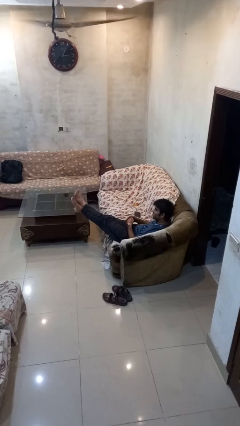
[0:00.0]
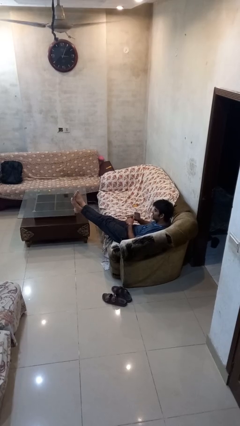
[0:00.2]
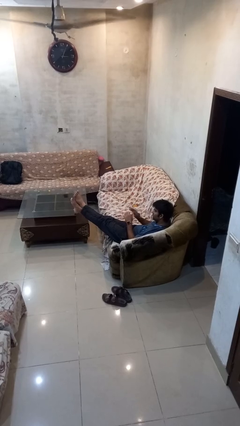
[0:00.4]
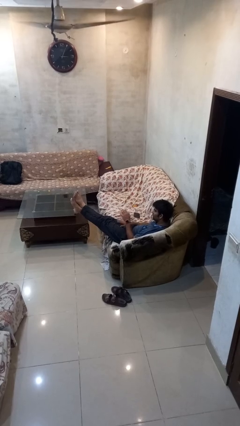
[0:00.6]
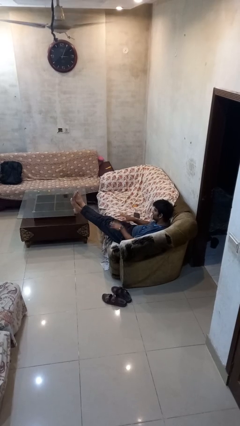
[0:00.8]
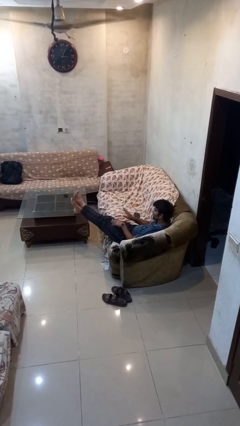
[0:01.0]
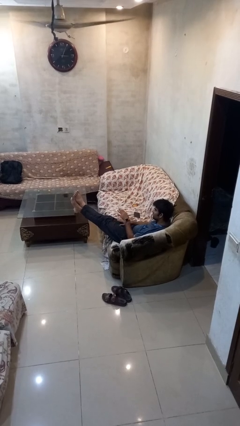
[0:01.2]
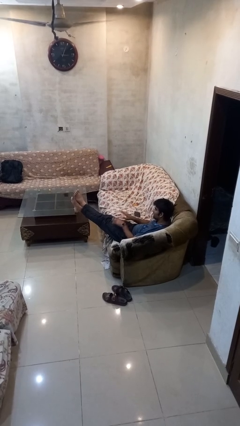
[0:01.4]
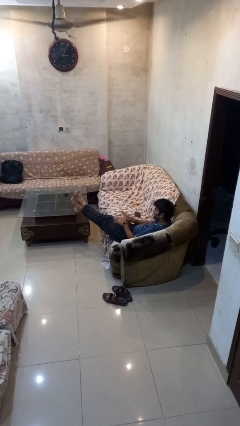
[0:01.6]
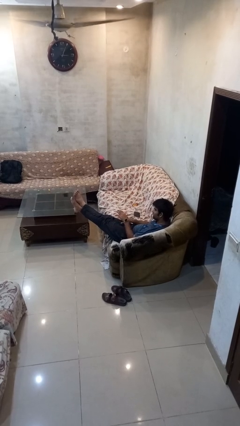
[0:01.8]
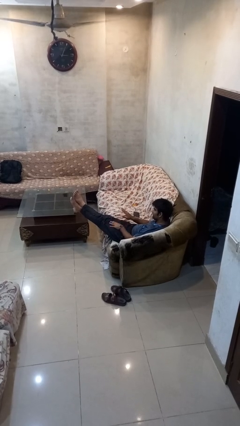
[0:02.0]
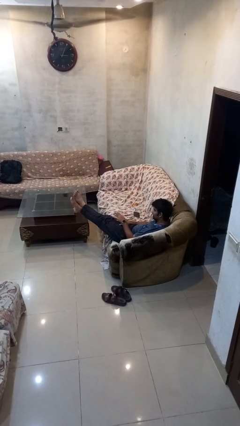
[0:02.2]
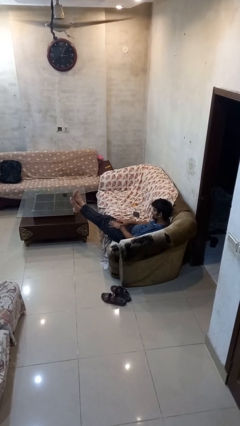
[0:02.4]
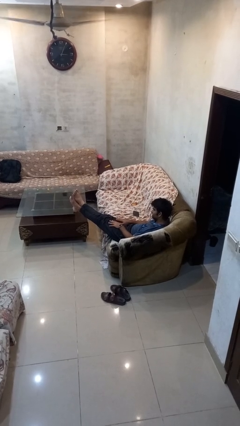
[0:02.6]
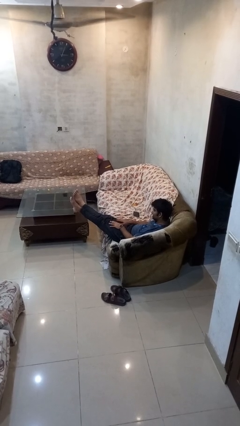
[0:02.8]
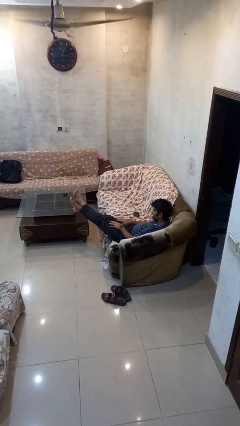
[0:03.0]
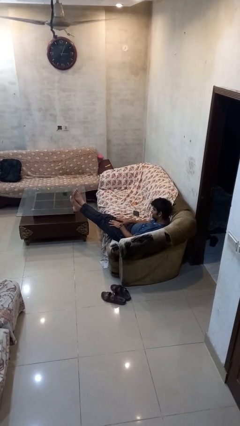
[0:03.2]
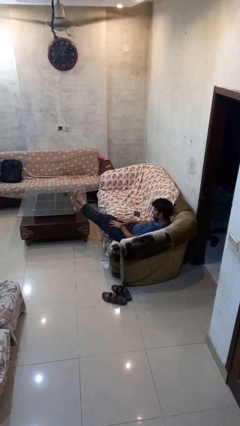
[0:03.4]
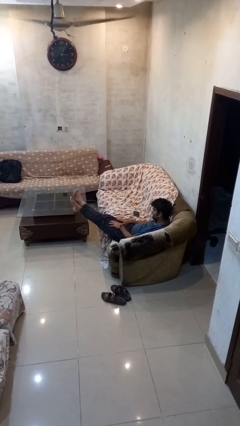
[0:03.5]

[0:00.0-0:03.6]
person slaps hands on thighs

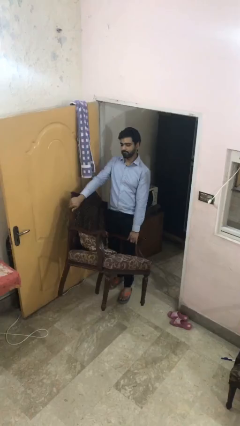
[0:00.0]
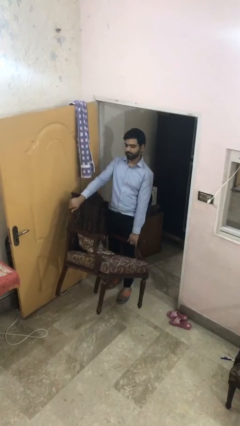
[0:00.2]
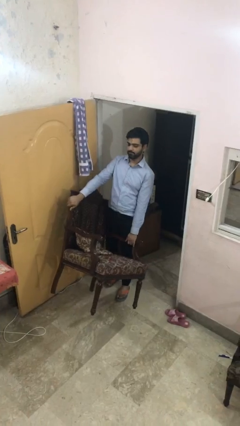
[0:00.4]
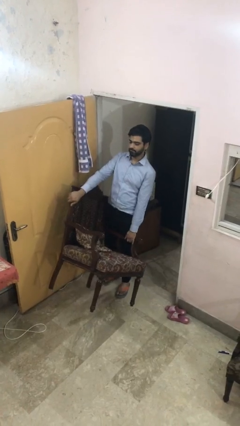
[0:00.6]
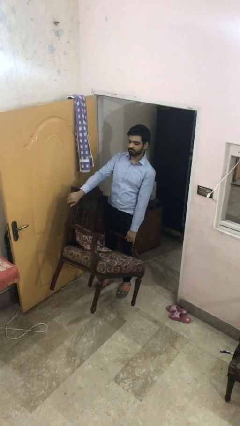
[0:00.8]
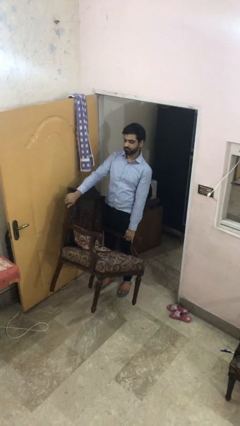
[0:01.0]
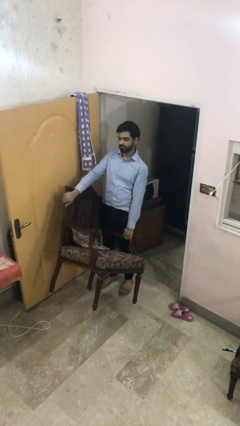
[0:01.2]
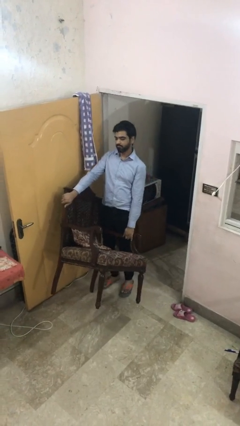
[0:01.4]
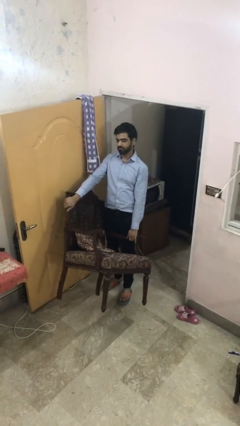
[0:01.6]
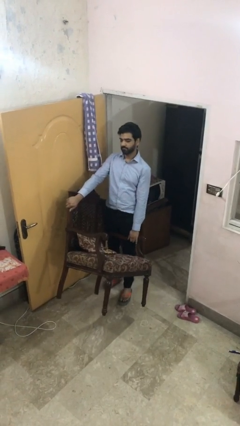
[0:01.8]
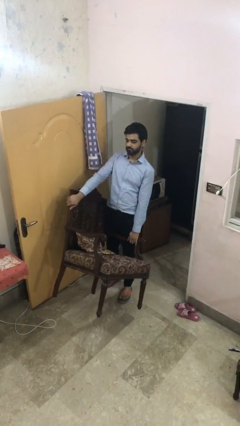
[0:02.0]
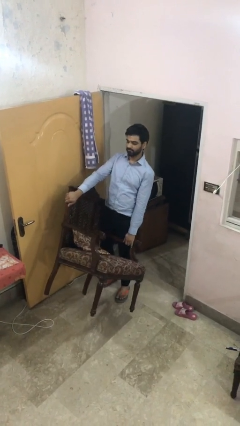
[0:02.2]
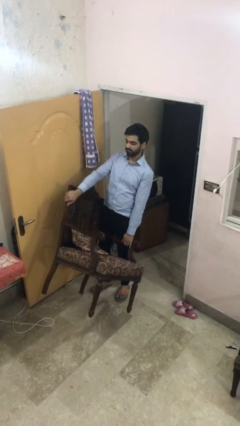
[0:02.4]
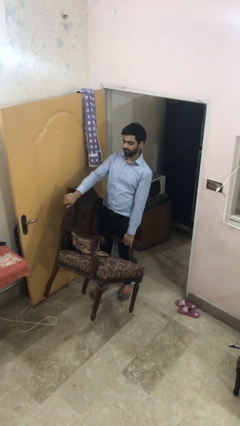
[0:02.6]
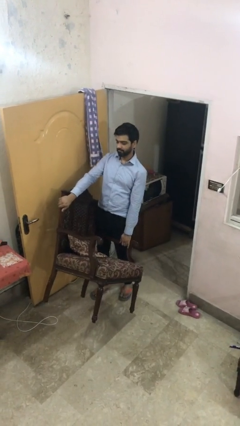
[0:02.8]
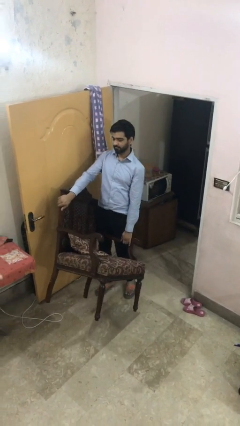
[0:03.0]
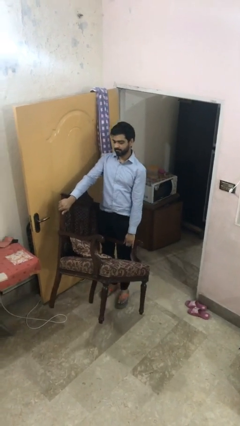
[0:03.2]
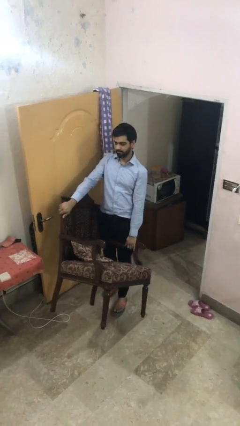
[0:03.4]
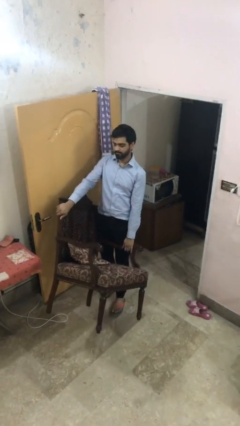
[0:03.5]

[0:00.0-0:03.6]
person carries heavy object

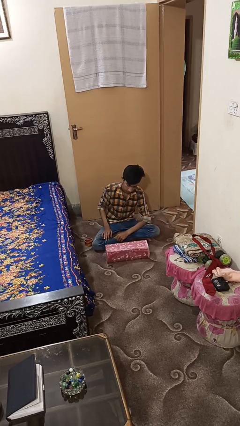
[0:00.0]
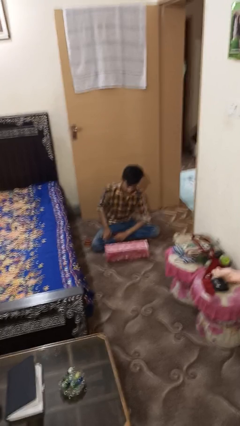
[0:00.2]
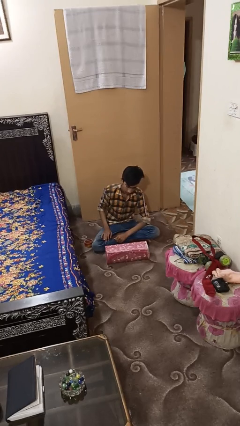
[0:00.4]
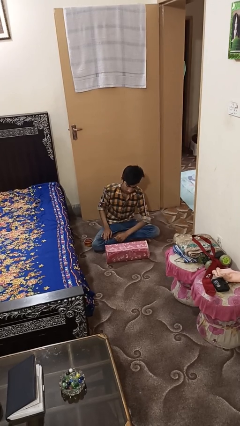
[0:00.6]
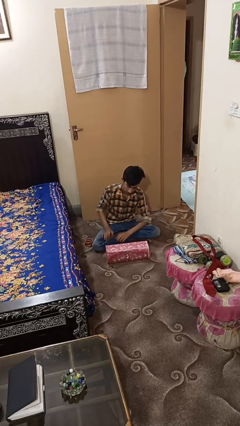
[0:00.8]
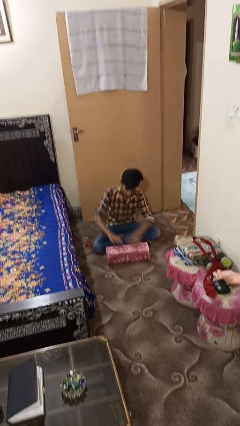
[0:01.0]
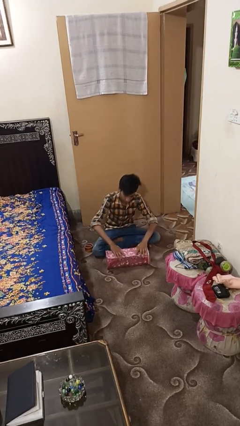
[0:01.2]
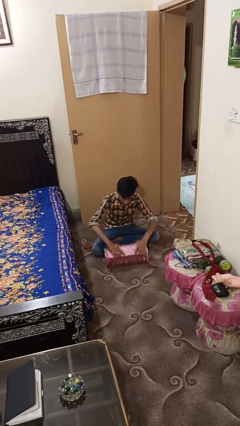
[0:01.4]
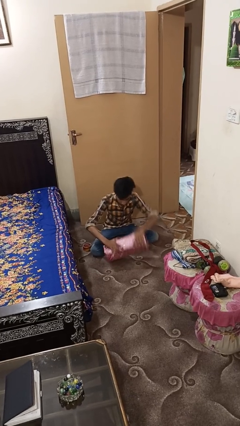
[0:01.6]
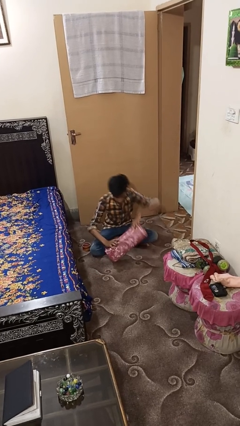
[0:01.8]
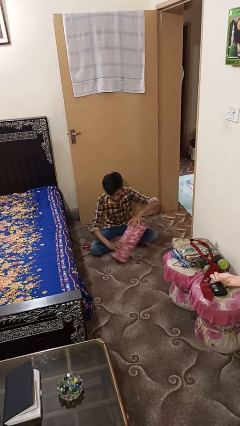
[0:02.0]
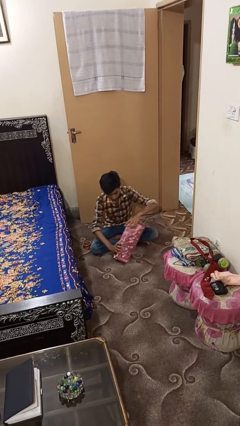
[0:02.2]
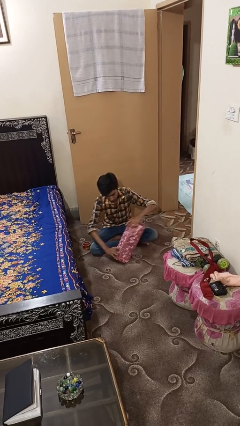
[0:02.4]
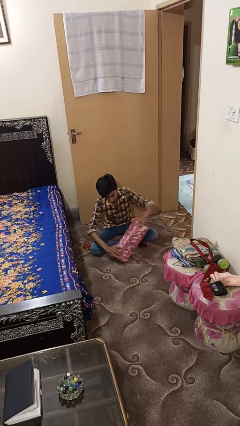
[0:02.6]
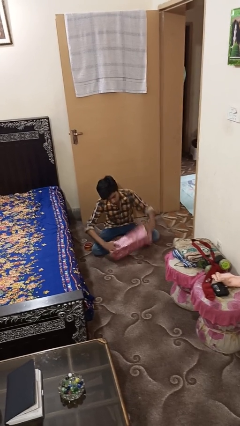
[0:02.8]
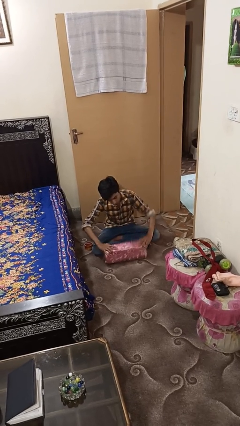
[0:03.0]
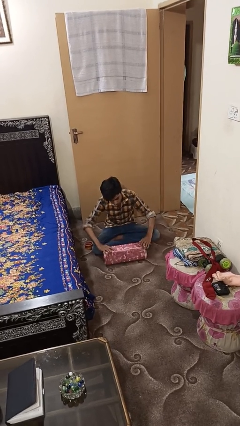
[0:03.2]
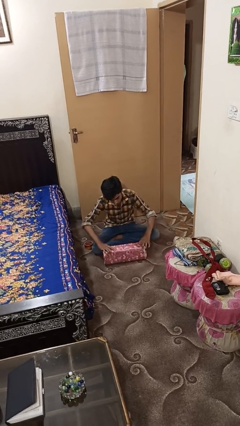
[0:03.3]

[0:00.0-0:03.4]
person wraps box

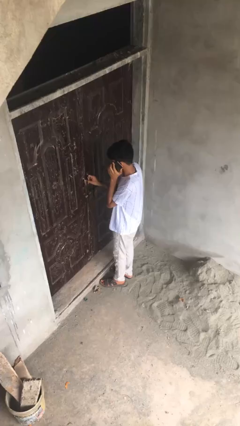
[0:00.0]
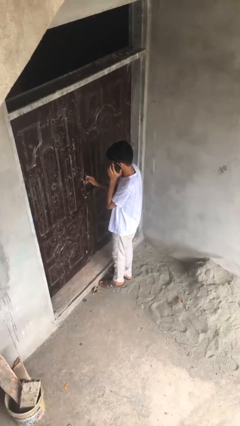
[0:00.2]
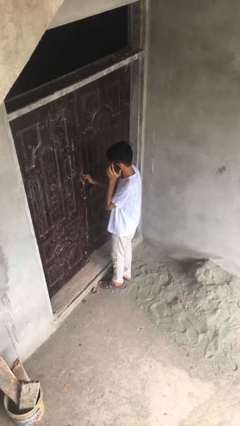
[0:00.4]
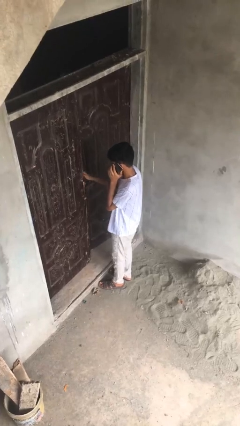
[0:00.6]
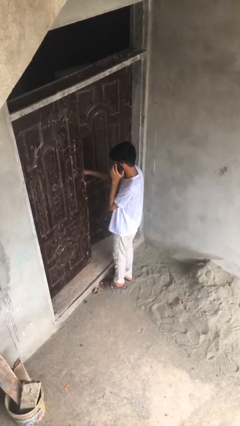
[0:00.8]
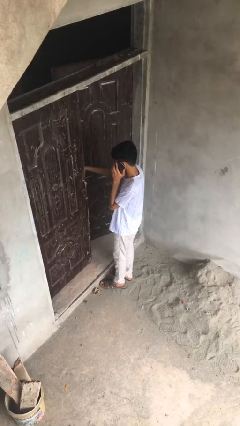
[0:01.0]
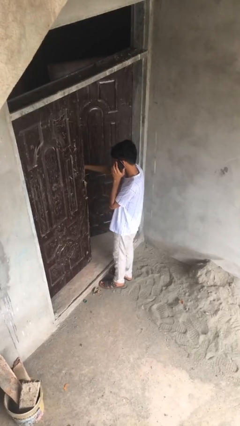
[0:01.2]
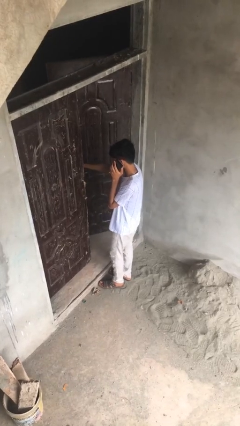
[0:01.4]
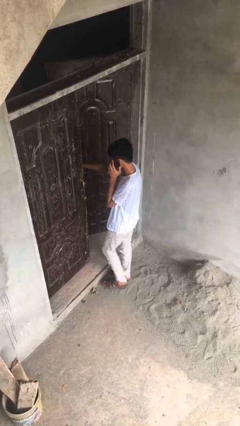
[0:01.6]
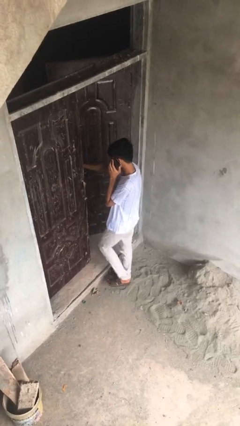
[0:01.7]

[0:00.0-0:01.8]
person opens facility door

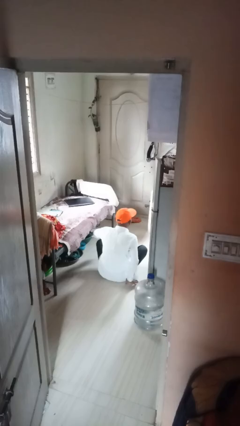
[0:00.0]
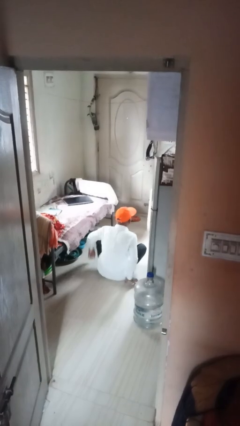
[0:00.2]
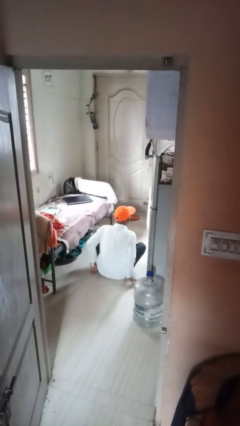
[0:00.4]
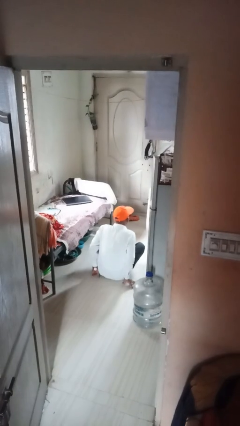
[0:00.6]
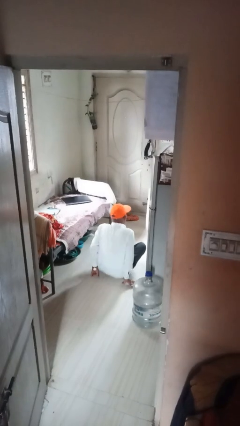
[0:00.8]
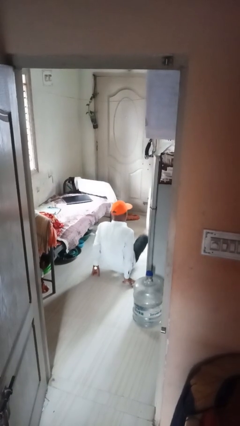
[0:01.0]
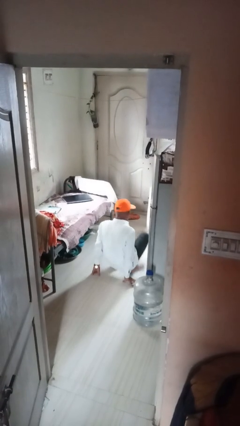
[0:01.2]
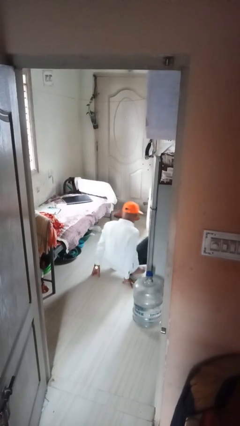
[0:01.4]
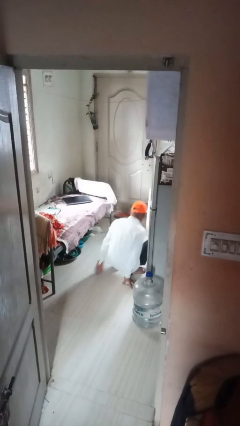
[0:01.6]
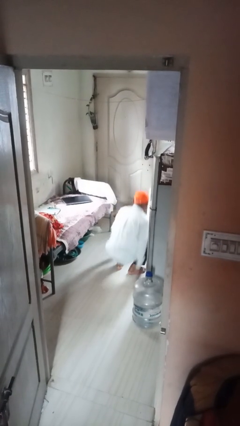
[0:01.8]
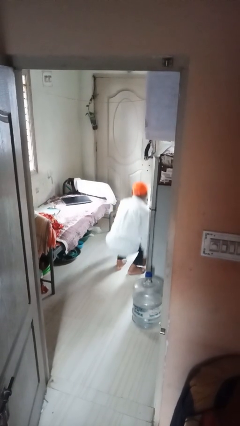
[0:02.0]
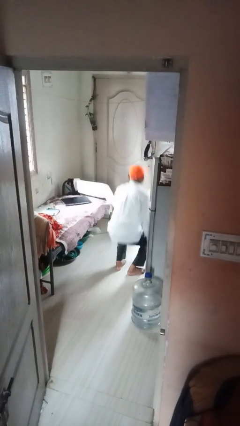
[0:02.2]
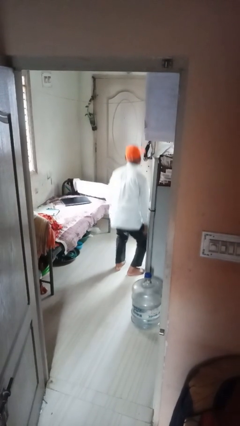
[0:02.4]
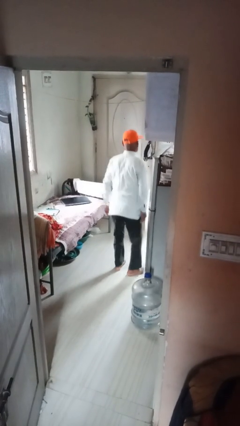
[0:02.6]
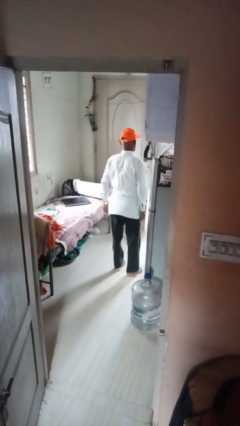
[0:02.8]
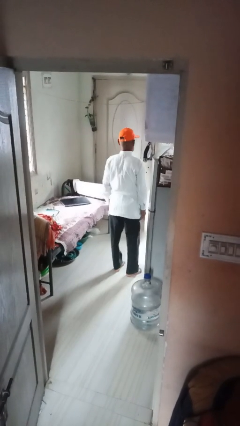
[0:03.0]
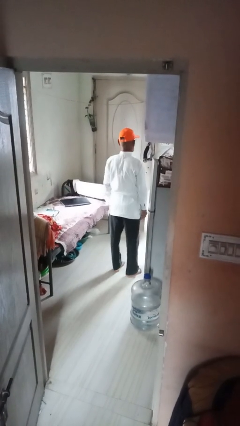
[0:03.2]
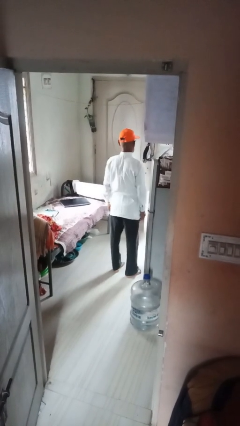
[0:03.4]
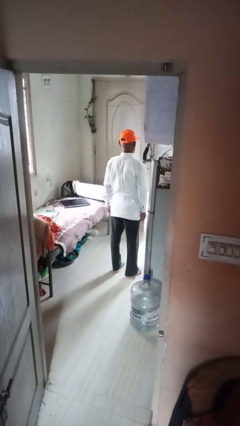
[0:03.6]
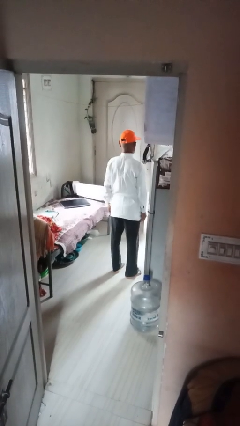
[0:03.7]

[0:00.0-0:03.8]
person stands up from floor

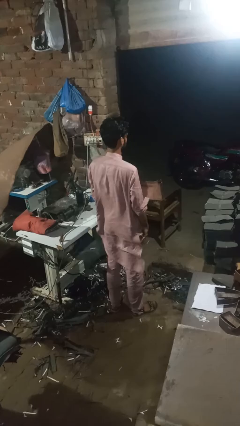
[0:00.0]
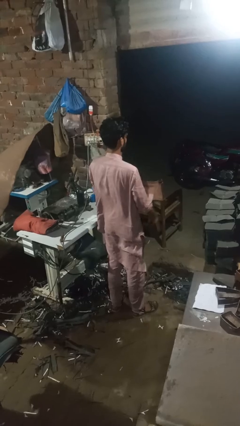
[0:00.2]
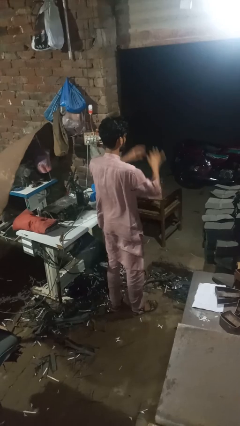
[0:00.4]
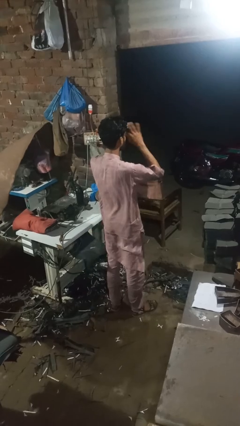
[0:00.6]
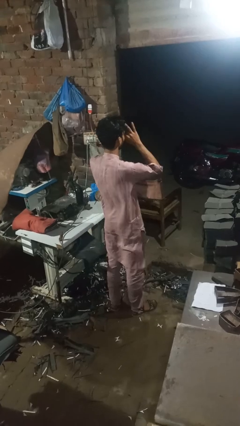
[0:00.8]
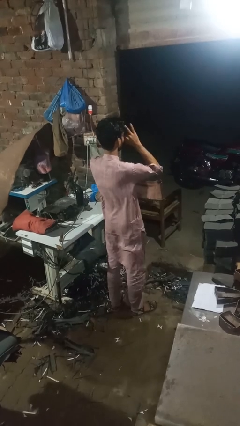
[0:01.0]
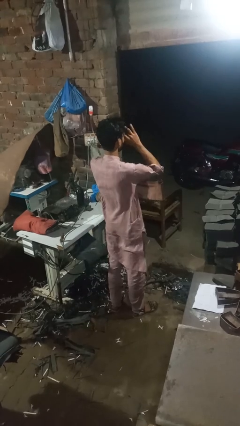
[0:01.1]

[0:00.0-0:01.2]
person rubs eyes

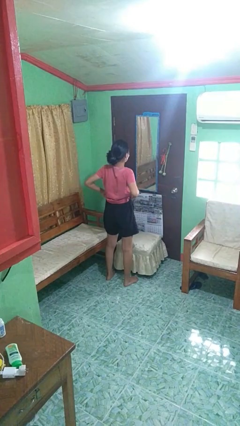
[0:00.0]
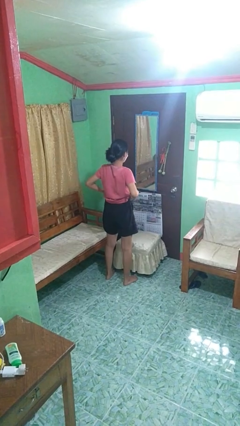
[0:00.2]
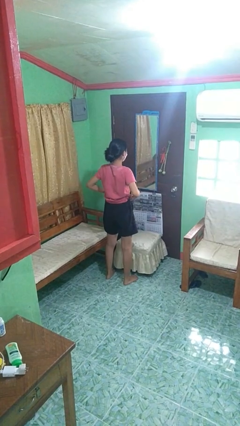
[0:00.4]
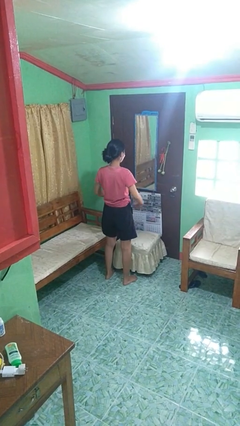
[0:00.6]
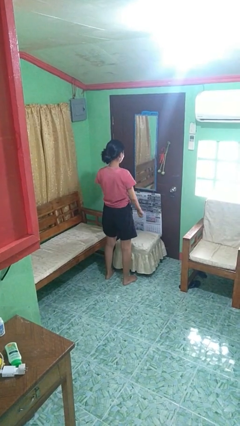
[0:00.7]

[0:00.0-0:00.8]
person hikes up pants
